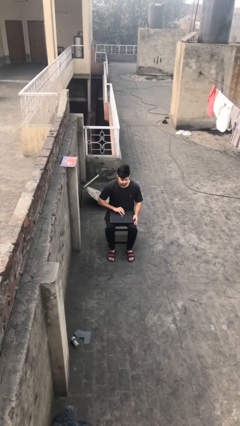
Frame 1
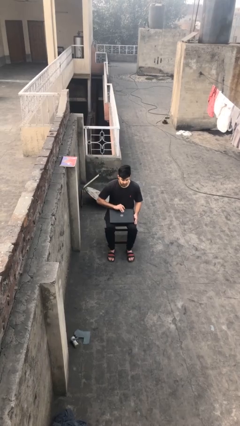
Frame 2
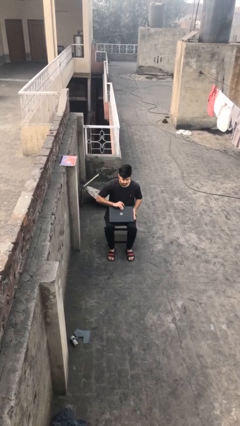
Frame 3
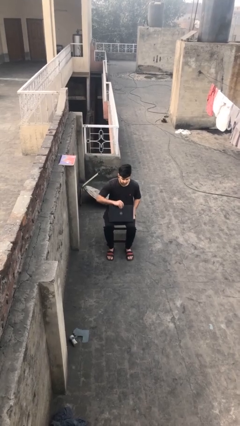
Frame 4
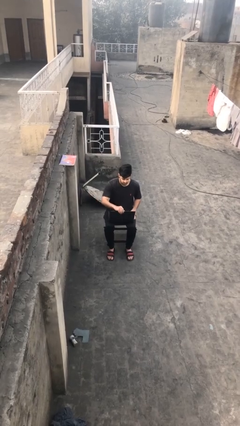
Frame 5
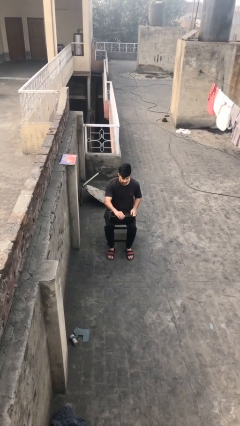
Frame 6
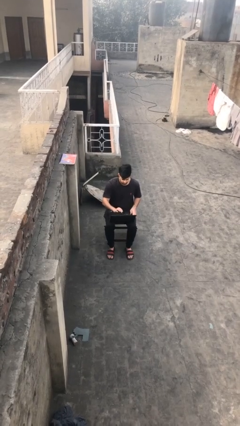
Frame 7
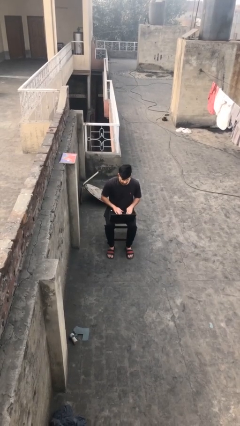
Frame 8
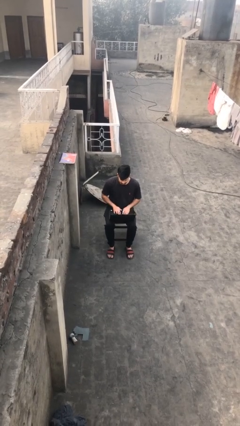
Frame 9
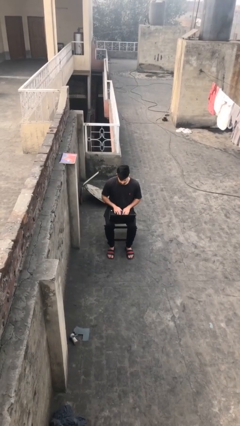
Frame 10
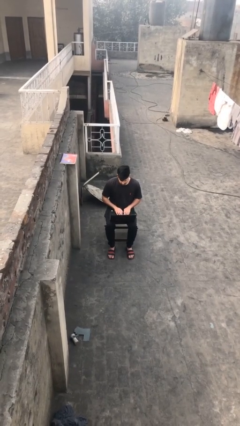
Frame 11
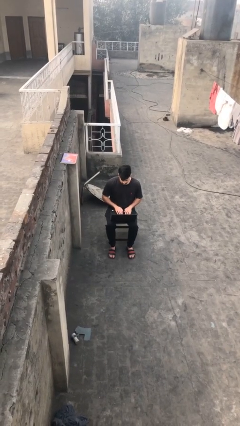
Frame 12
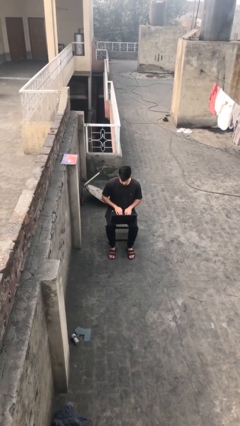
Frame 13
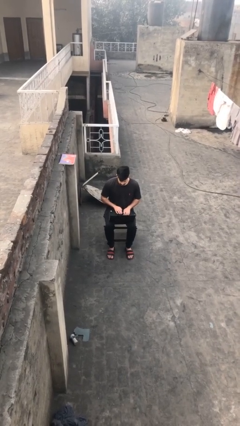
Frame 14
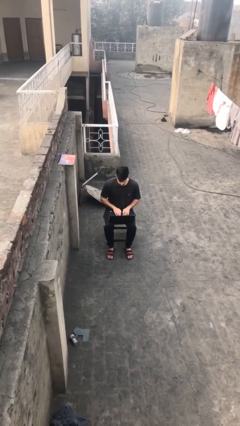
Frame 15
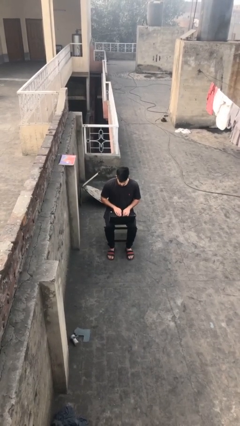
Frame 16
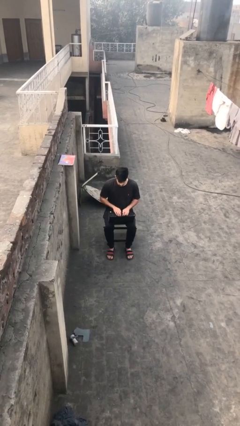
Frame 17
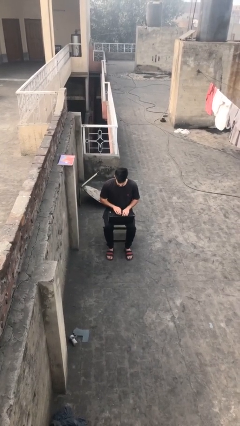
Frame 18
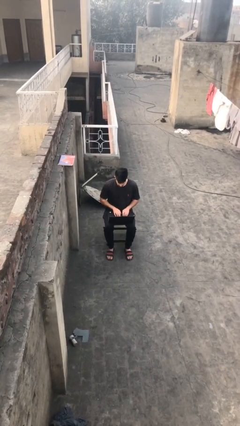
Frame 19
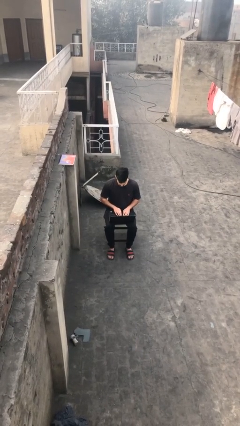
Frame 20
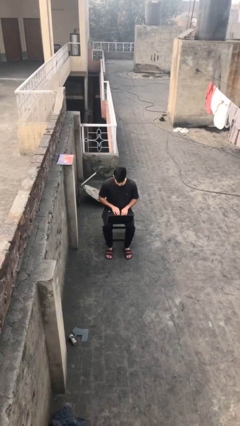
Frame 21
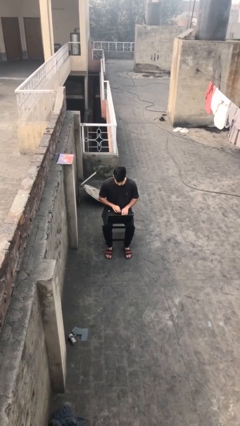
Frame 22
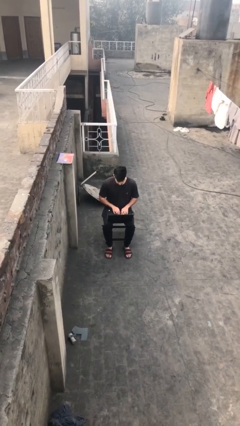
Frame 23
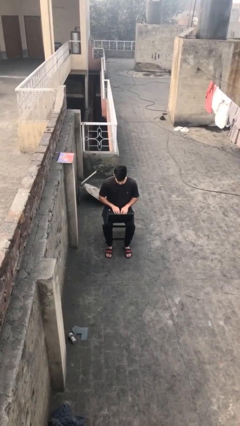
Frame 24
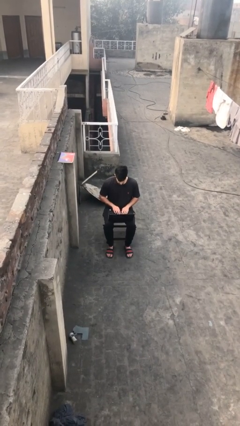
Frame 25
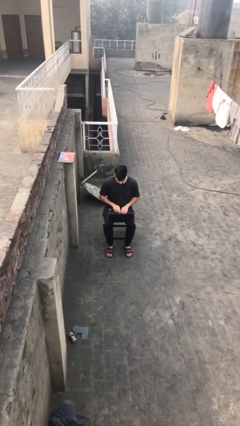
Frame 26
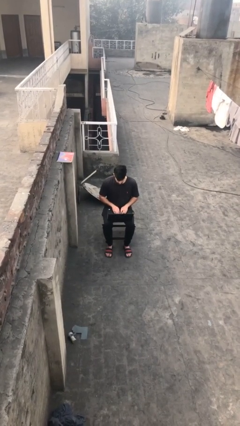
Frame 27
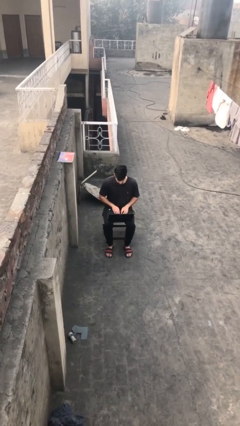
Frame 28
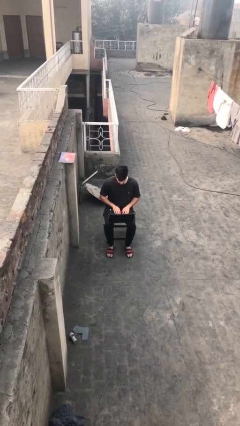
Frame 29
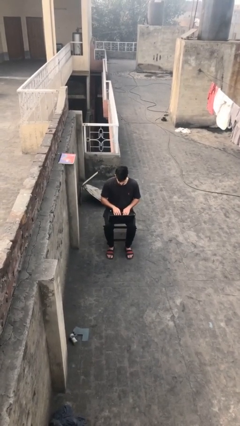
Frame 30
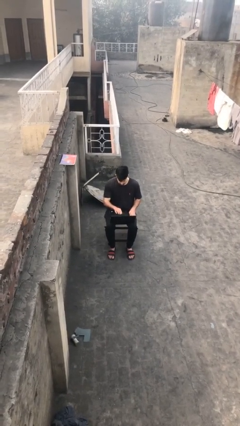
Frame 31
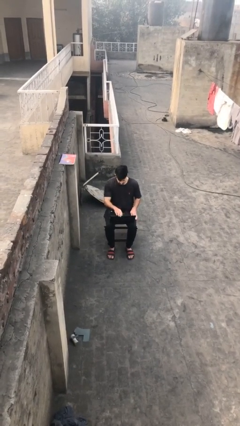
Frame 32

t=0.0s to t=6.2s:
person interacts with laptop

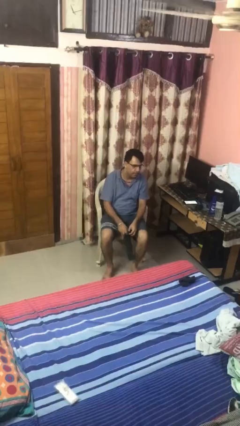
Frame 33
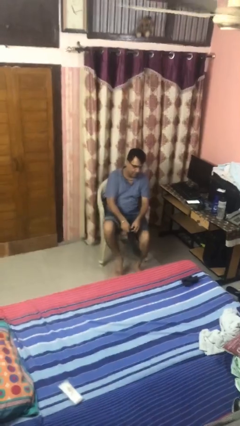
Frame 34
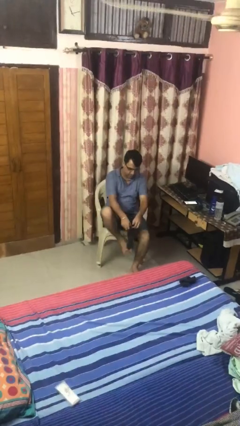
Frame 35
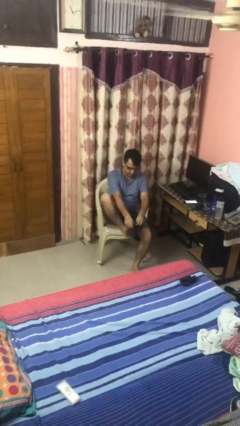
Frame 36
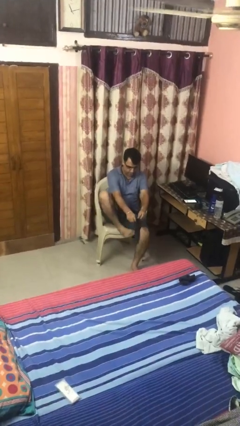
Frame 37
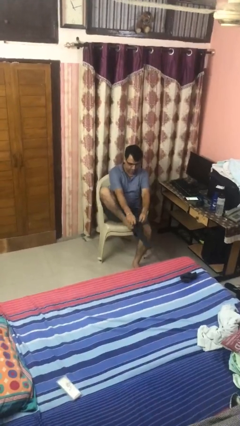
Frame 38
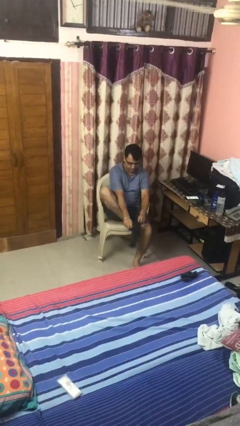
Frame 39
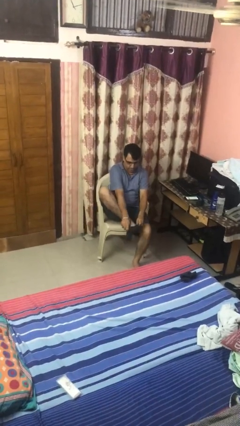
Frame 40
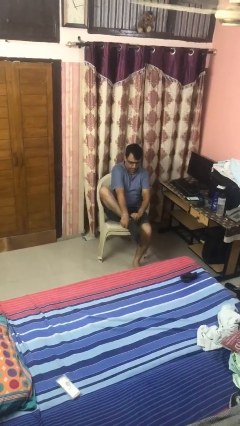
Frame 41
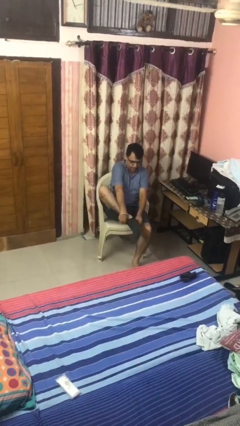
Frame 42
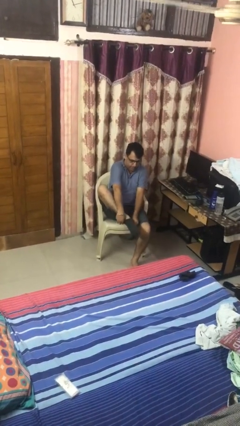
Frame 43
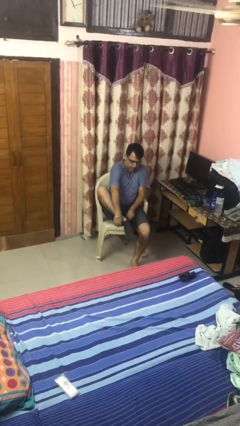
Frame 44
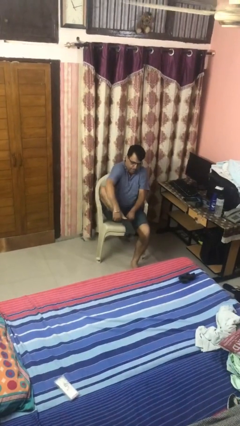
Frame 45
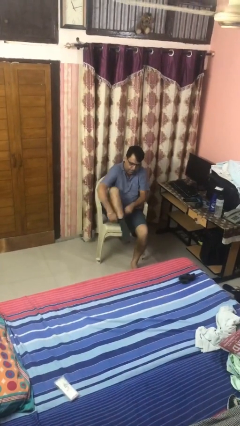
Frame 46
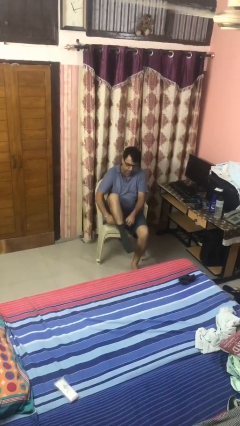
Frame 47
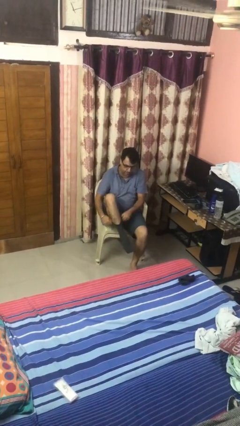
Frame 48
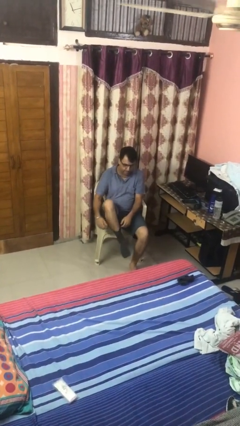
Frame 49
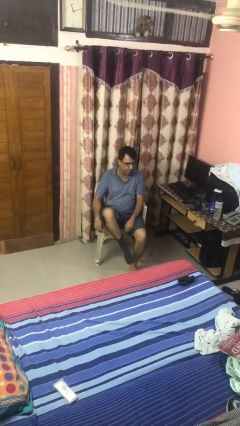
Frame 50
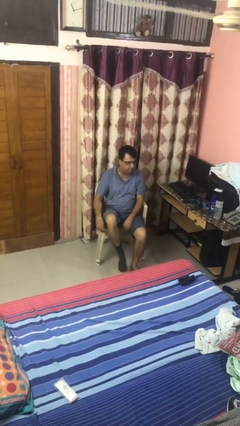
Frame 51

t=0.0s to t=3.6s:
person puts on socks

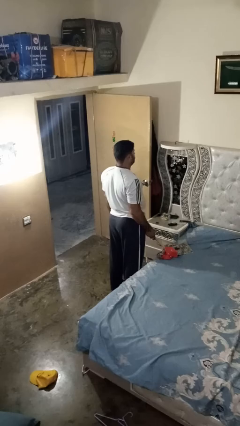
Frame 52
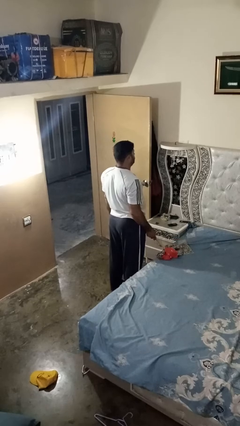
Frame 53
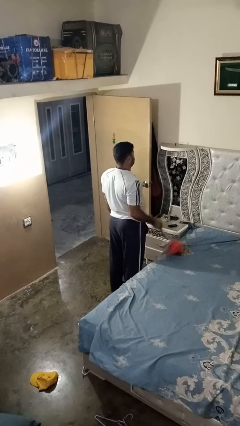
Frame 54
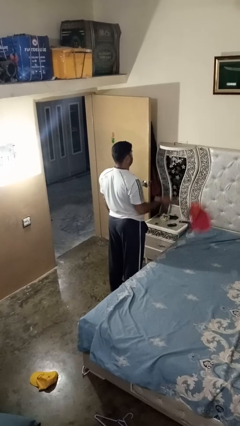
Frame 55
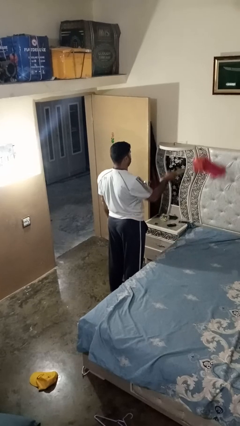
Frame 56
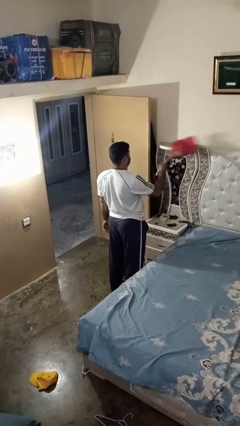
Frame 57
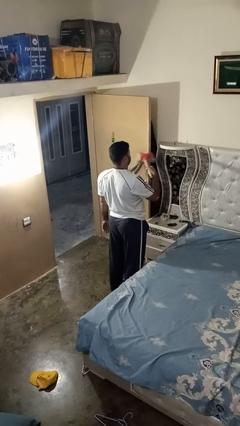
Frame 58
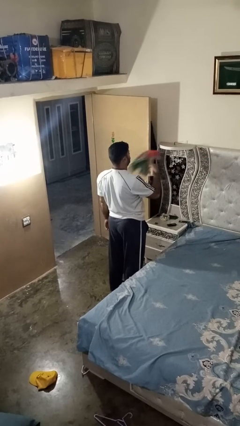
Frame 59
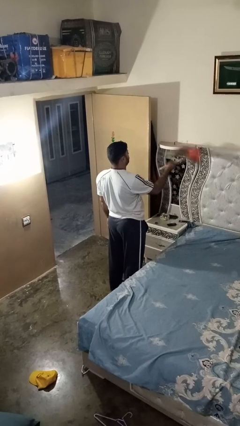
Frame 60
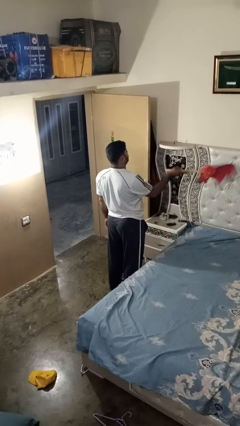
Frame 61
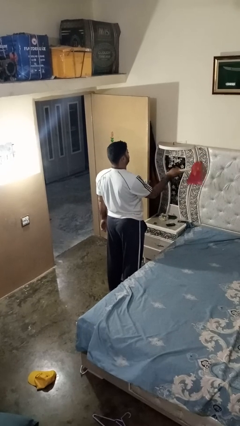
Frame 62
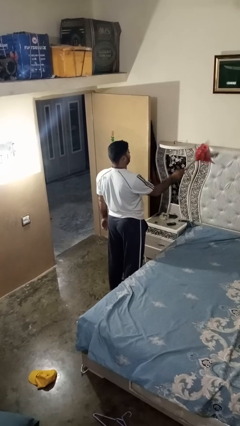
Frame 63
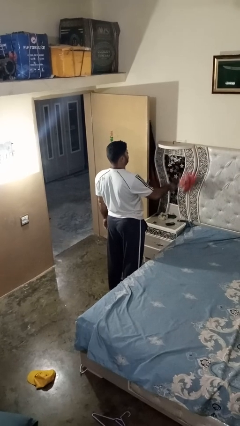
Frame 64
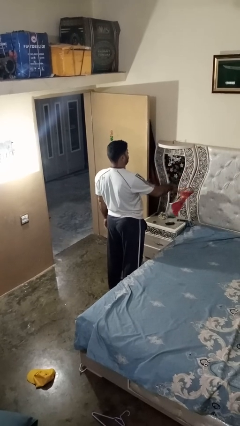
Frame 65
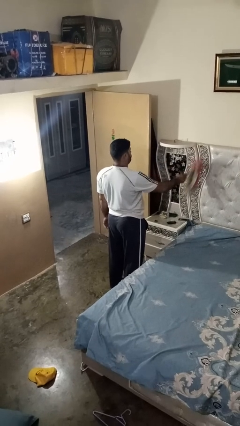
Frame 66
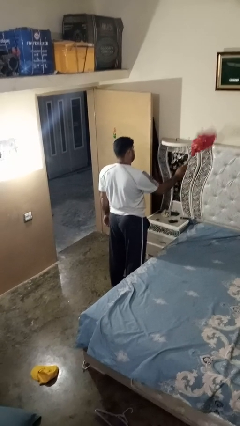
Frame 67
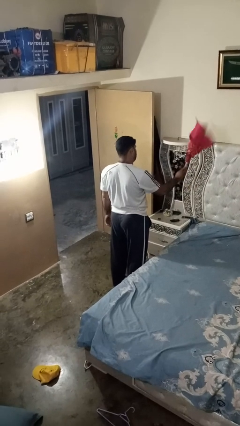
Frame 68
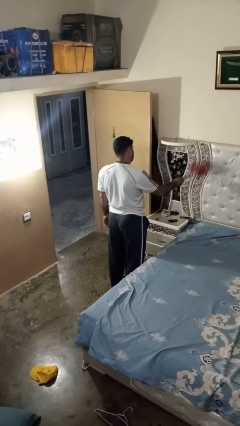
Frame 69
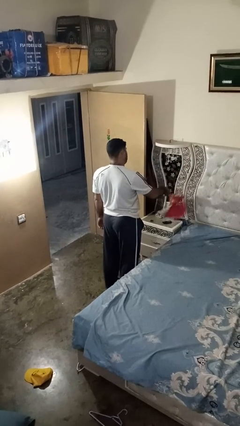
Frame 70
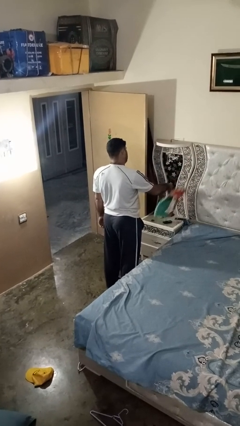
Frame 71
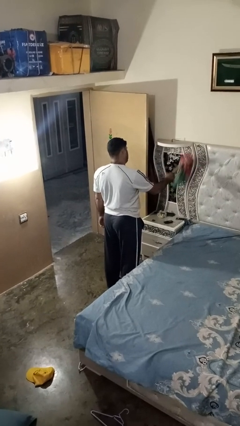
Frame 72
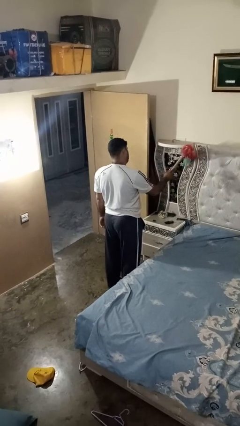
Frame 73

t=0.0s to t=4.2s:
person dusts furniture

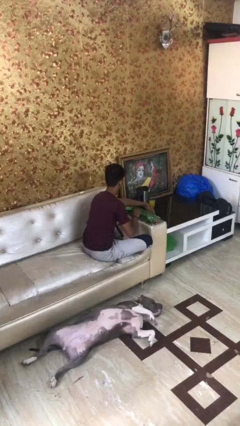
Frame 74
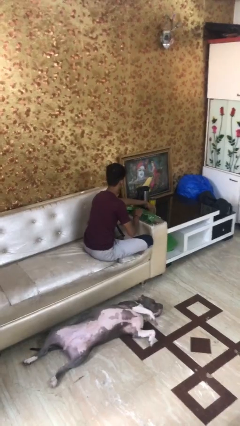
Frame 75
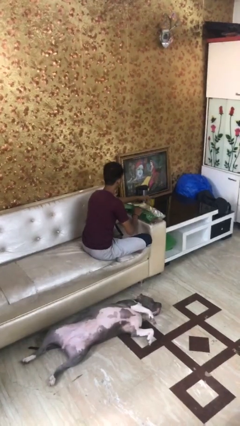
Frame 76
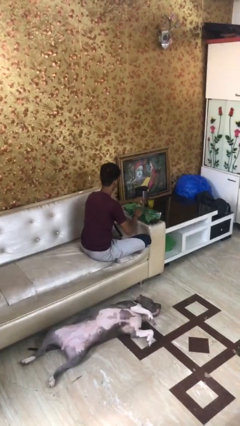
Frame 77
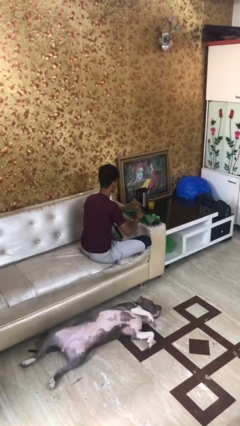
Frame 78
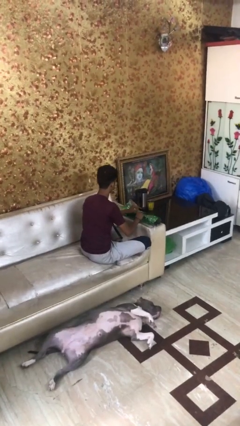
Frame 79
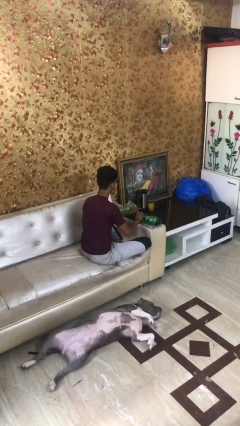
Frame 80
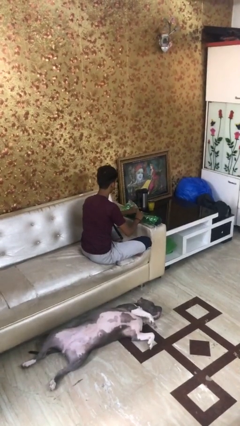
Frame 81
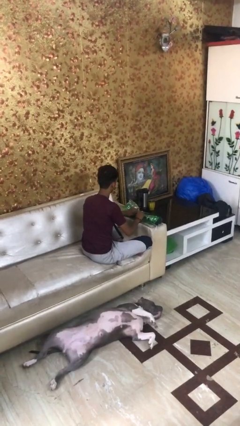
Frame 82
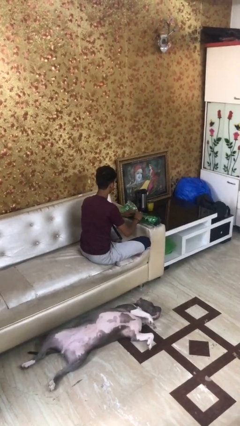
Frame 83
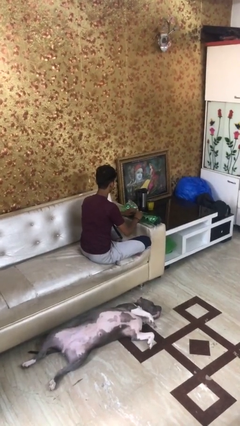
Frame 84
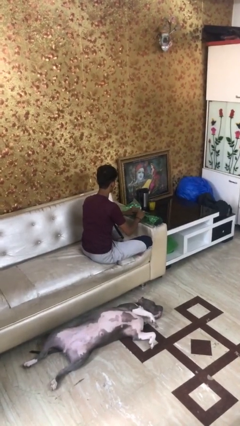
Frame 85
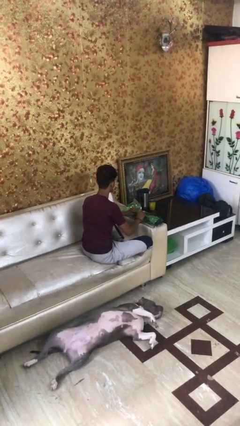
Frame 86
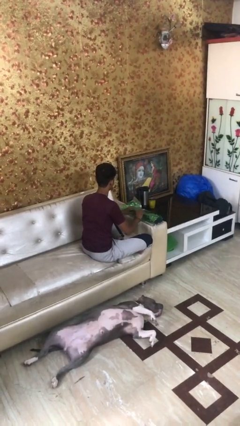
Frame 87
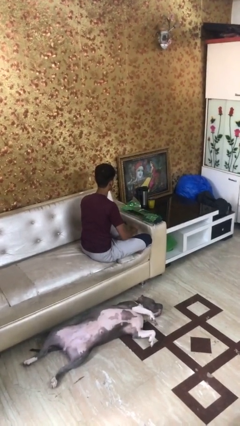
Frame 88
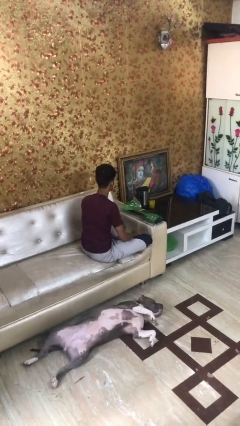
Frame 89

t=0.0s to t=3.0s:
person wraps box

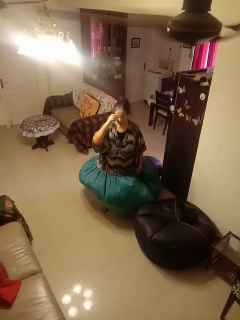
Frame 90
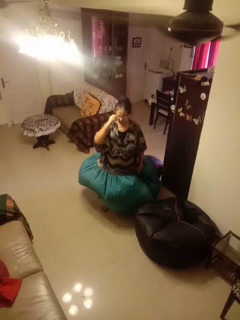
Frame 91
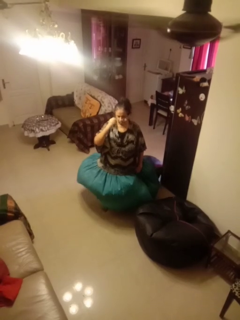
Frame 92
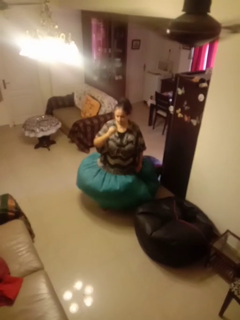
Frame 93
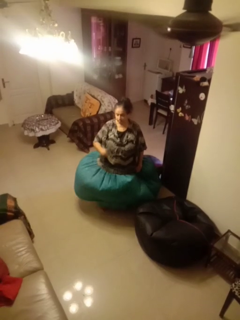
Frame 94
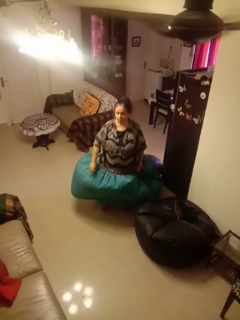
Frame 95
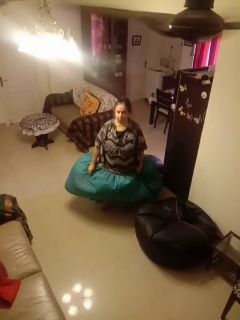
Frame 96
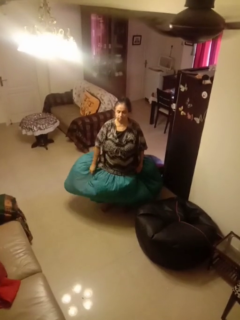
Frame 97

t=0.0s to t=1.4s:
person takes off glasses
